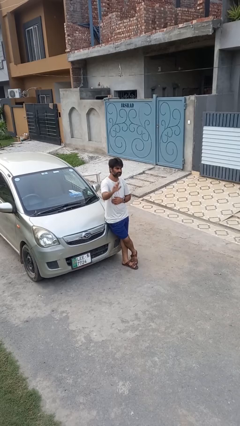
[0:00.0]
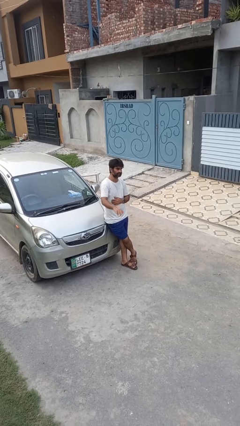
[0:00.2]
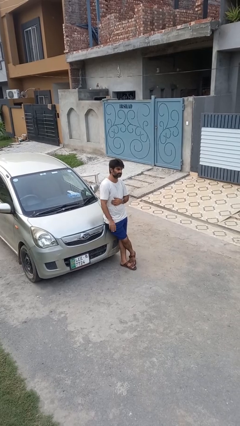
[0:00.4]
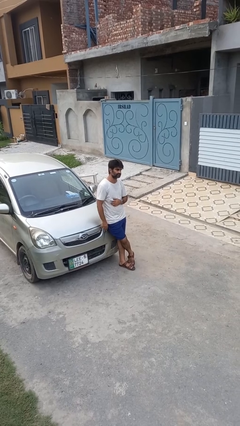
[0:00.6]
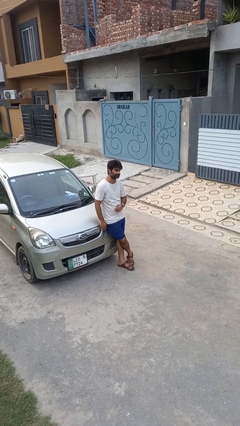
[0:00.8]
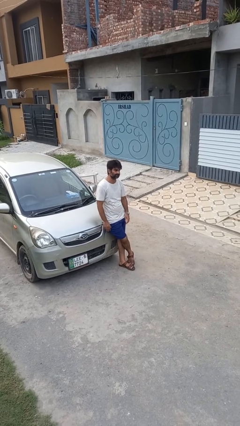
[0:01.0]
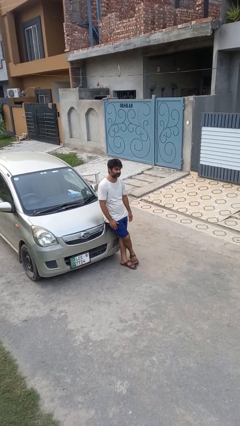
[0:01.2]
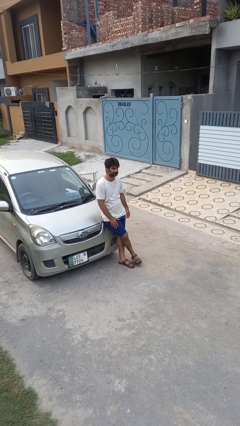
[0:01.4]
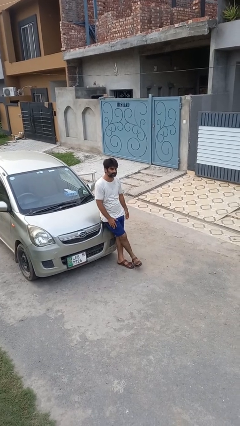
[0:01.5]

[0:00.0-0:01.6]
person gestures lower hand

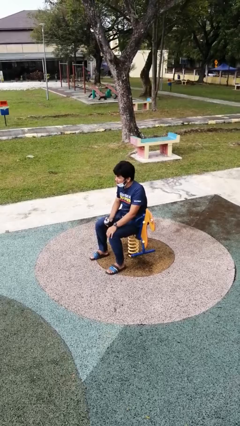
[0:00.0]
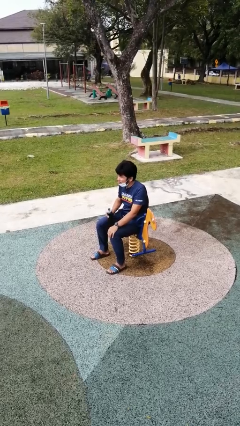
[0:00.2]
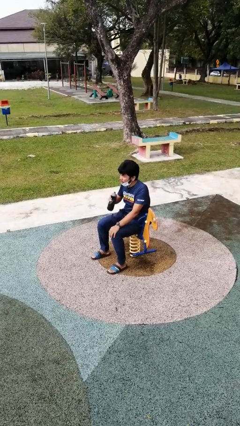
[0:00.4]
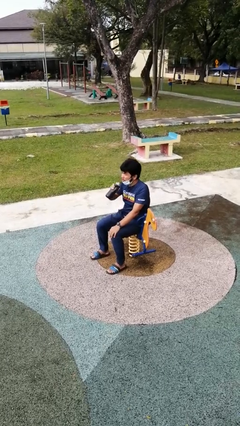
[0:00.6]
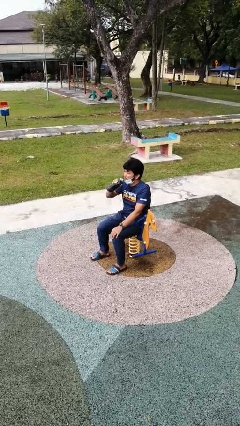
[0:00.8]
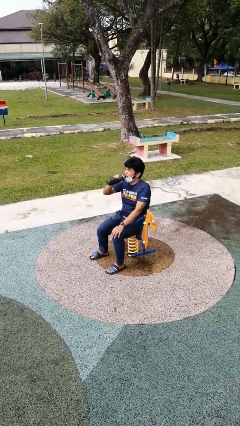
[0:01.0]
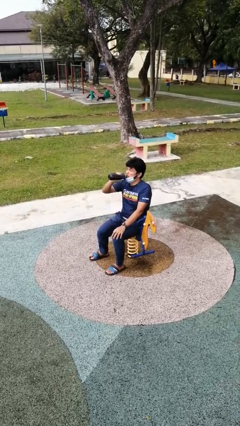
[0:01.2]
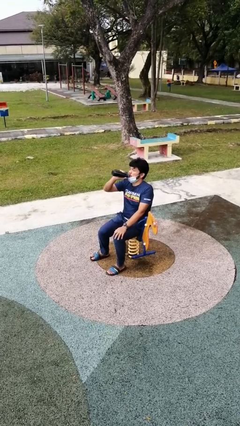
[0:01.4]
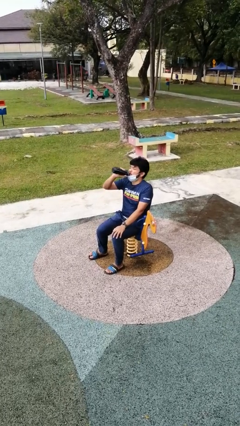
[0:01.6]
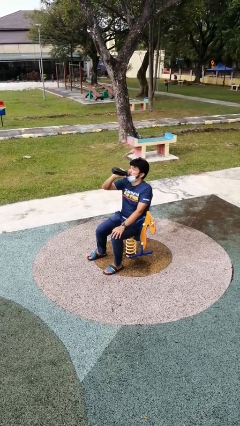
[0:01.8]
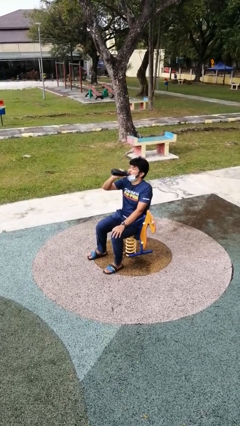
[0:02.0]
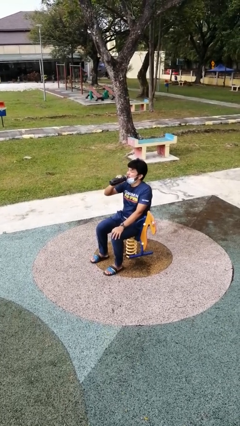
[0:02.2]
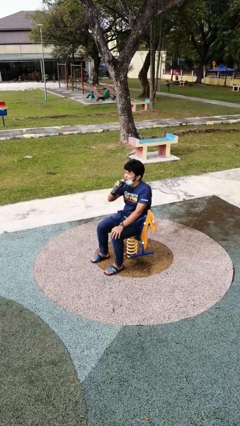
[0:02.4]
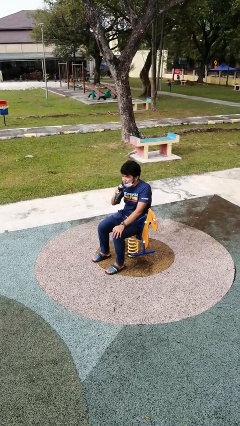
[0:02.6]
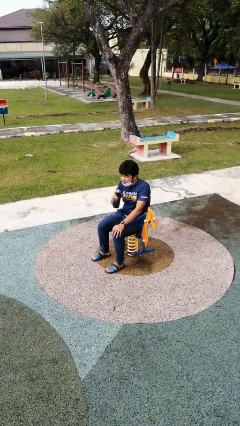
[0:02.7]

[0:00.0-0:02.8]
person drinks from bottle

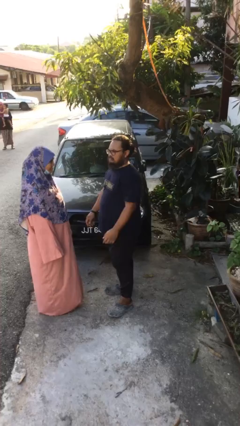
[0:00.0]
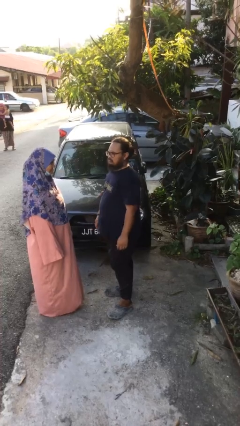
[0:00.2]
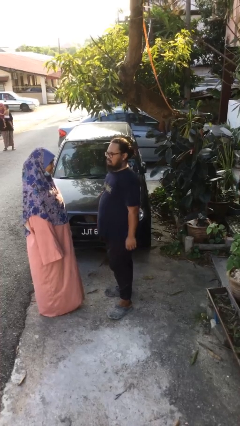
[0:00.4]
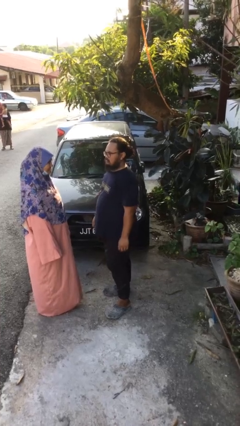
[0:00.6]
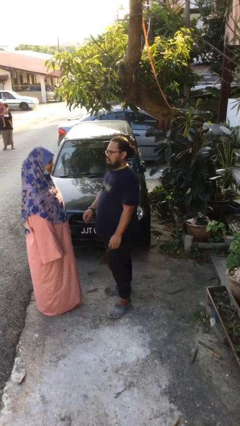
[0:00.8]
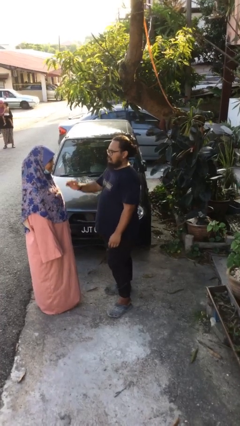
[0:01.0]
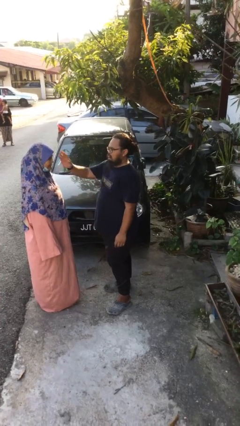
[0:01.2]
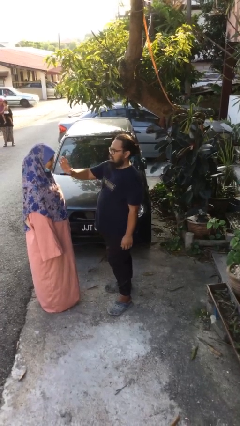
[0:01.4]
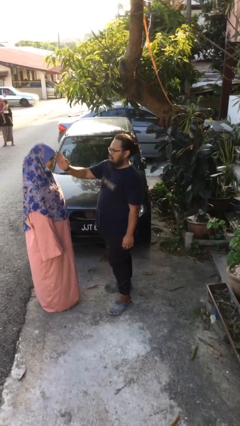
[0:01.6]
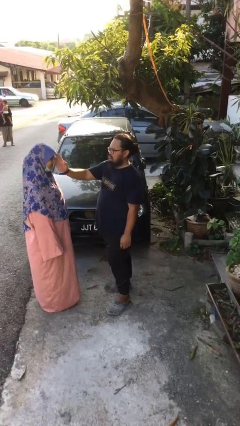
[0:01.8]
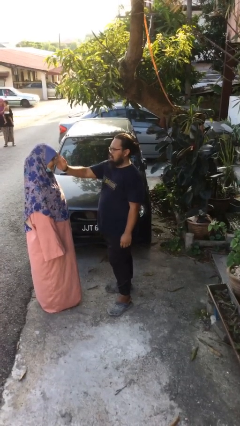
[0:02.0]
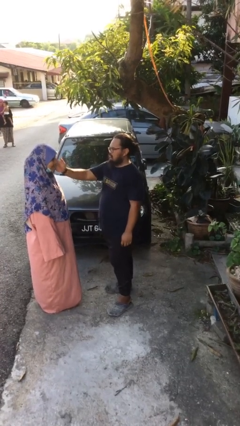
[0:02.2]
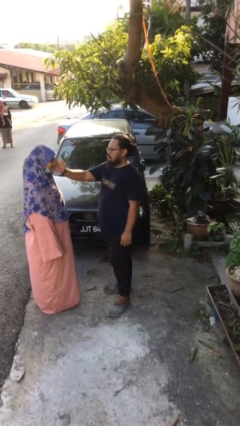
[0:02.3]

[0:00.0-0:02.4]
person touches face of person

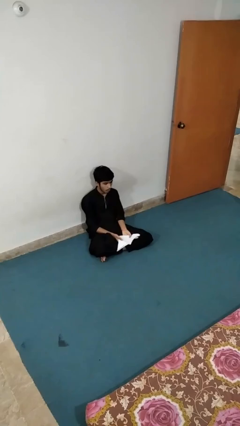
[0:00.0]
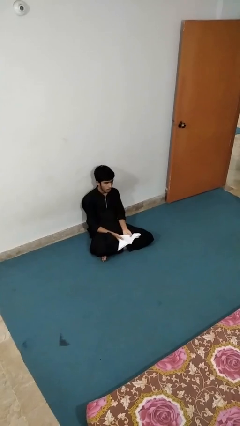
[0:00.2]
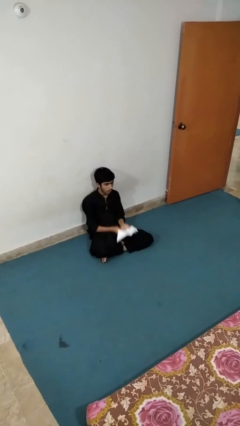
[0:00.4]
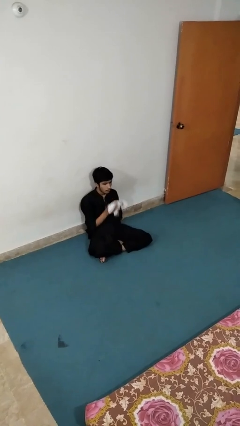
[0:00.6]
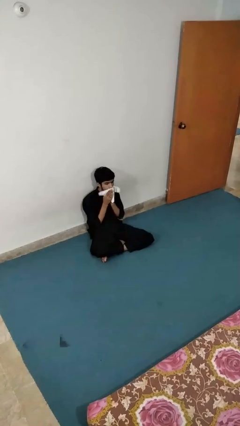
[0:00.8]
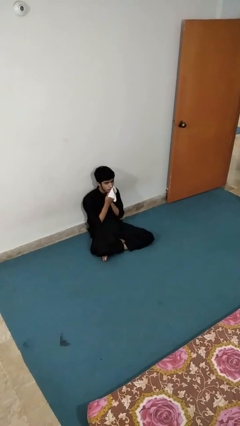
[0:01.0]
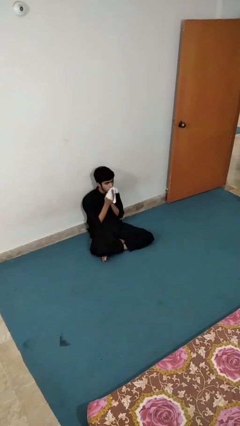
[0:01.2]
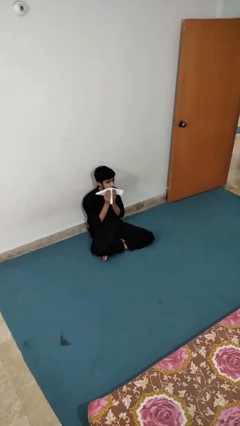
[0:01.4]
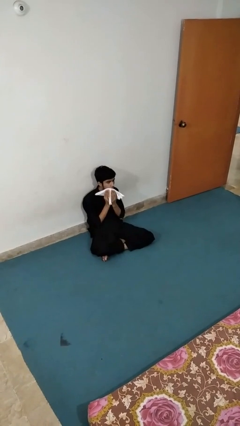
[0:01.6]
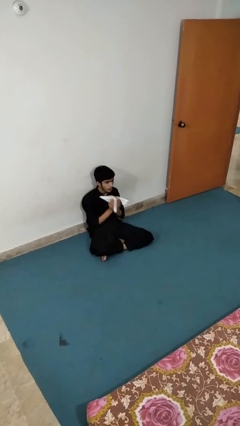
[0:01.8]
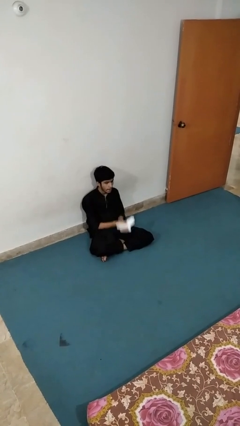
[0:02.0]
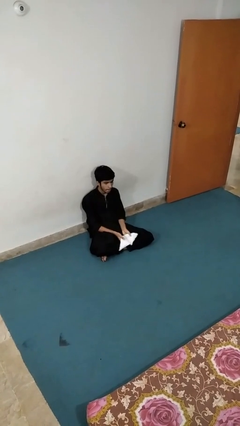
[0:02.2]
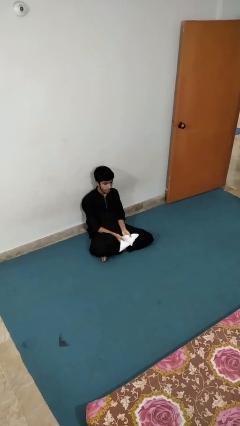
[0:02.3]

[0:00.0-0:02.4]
person wipes mouth with napkin

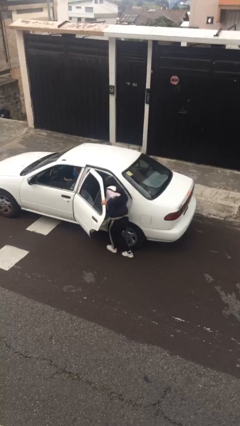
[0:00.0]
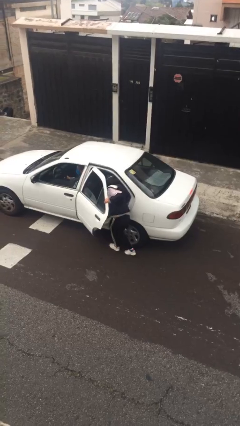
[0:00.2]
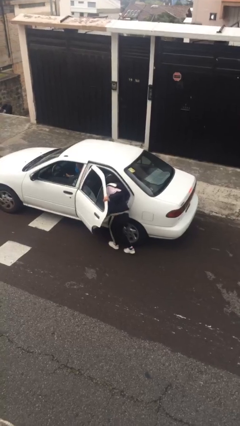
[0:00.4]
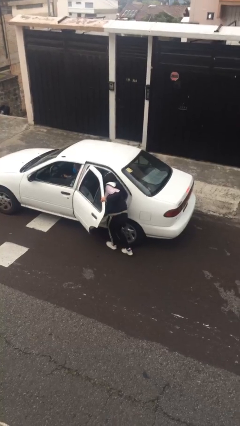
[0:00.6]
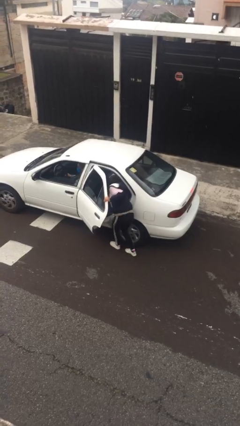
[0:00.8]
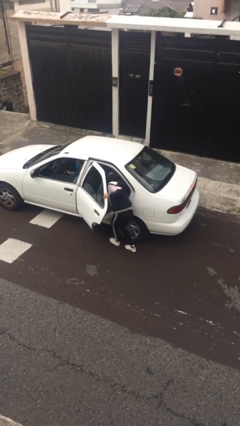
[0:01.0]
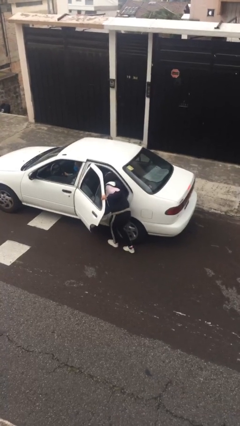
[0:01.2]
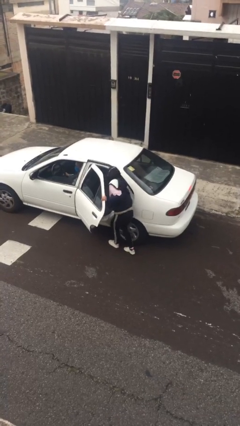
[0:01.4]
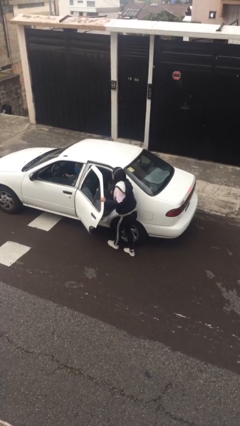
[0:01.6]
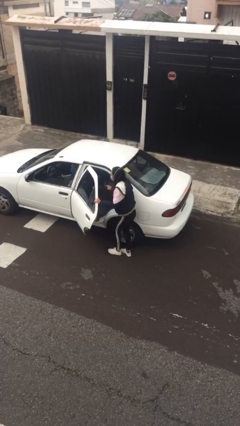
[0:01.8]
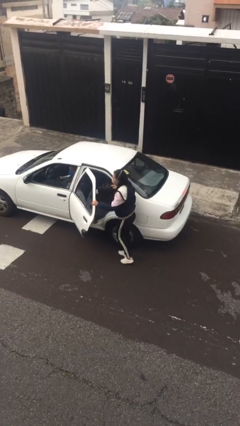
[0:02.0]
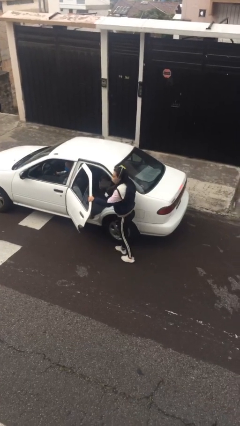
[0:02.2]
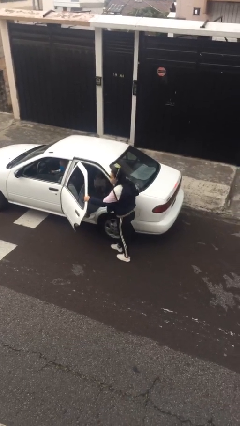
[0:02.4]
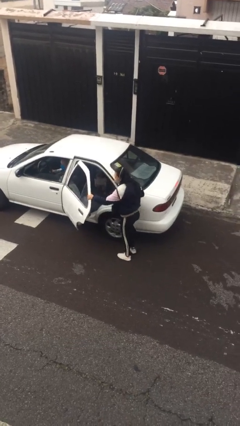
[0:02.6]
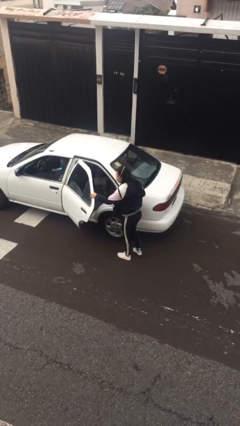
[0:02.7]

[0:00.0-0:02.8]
person unloads car

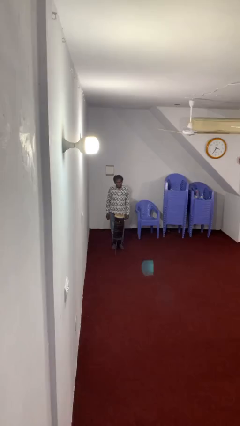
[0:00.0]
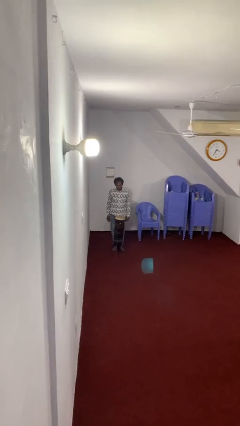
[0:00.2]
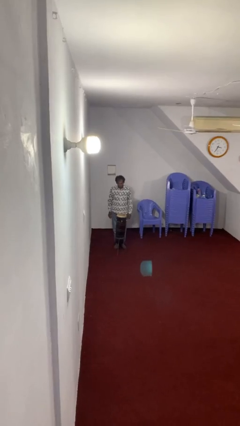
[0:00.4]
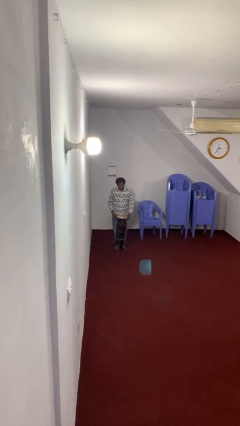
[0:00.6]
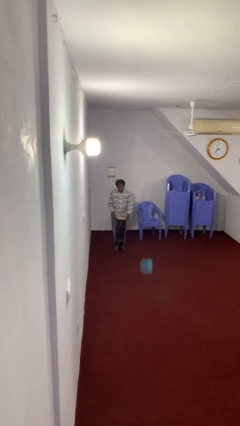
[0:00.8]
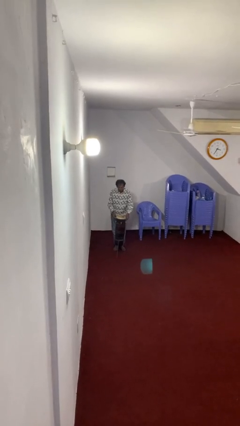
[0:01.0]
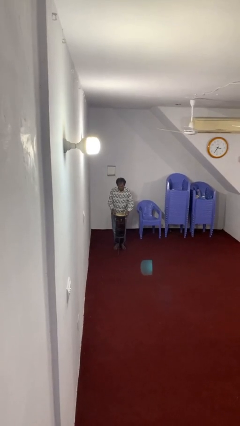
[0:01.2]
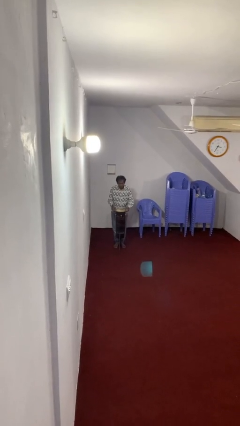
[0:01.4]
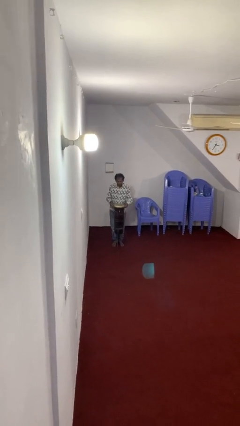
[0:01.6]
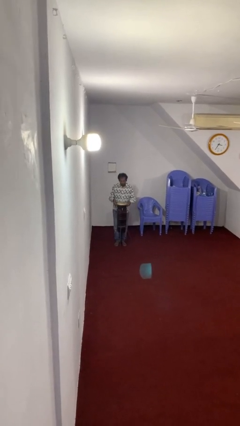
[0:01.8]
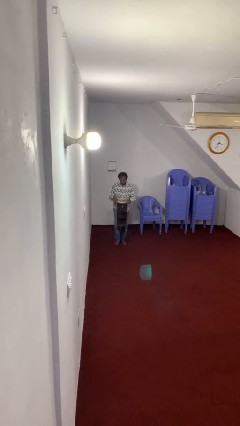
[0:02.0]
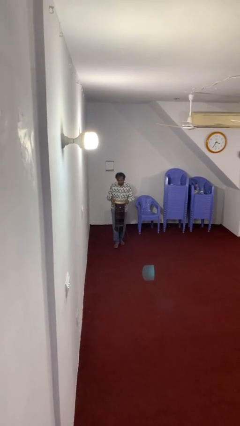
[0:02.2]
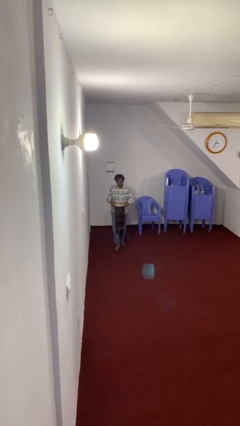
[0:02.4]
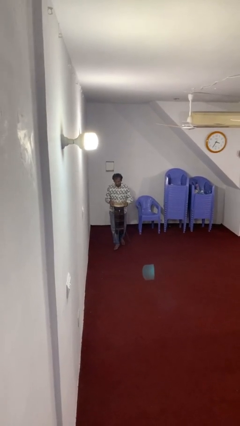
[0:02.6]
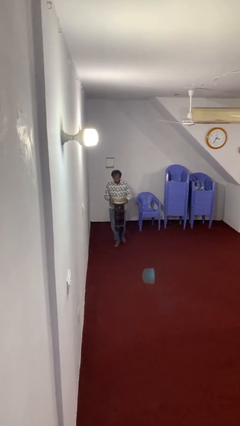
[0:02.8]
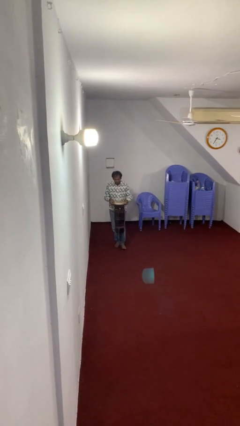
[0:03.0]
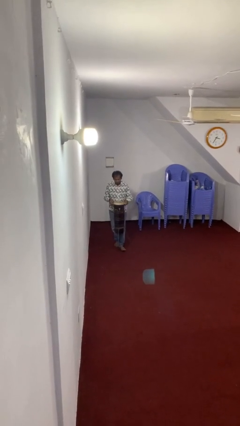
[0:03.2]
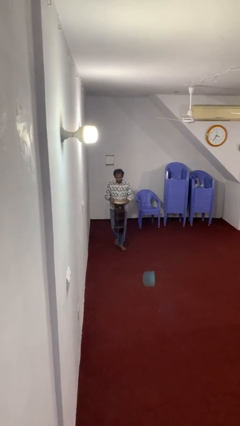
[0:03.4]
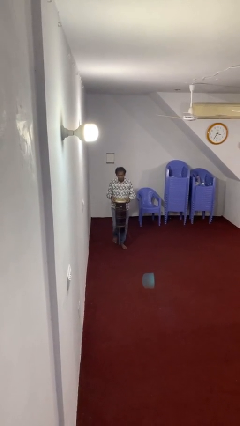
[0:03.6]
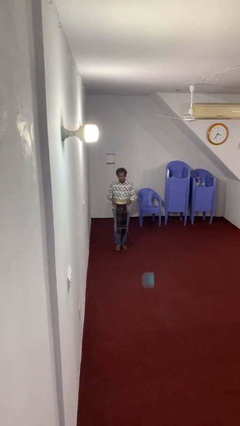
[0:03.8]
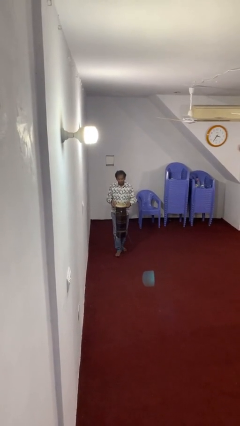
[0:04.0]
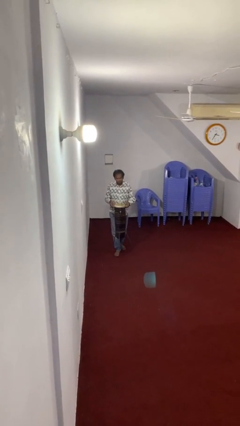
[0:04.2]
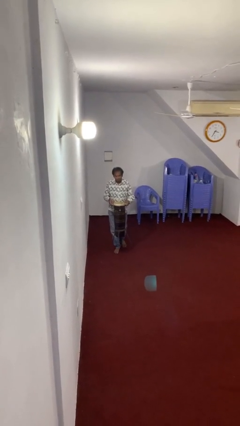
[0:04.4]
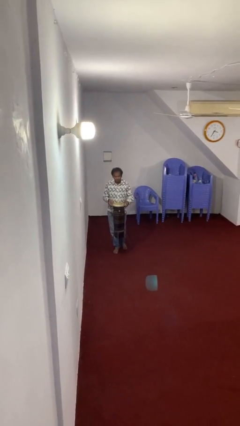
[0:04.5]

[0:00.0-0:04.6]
person carries heavy object

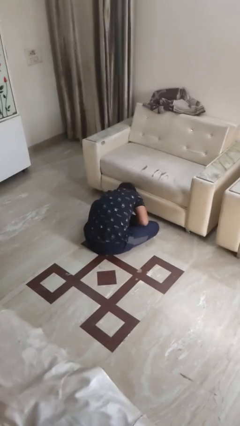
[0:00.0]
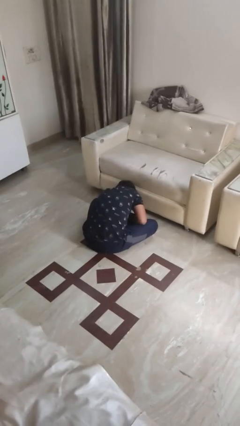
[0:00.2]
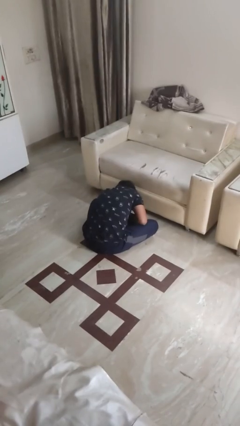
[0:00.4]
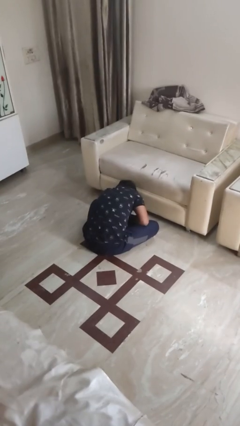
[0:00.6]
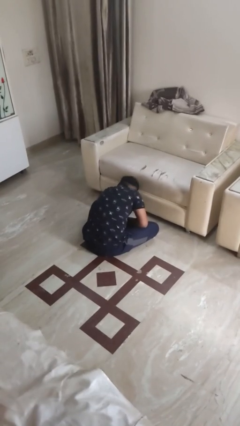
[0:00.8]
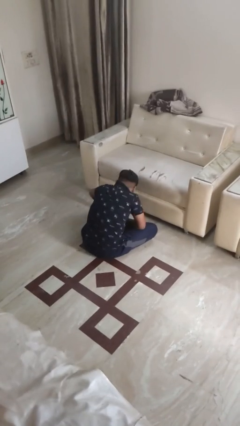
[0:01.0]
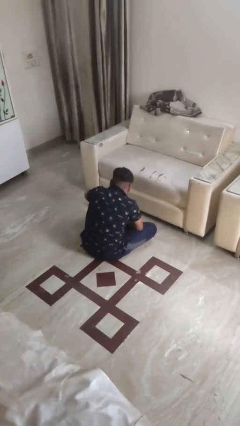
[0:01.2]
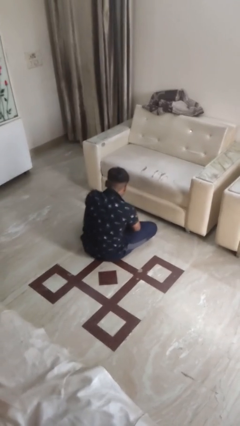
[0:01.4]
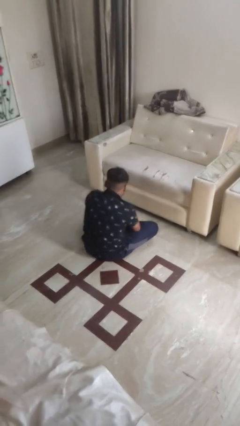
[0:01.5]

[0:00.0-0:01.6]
person searches under couch
